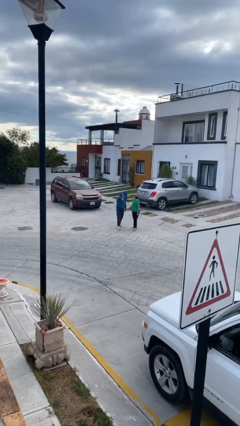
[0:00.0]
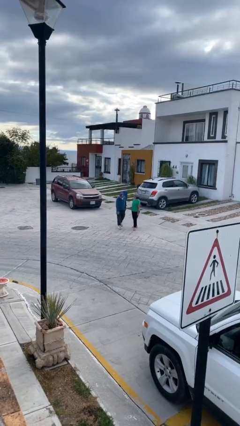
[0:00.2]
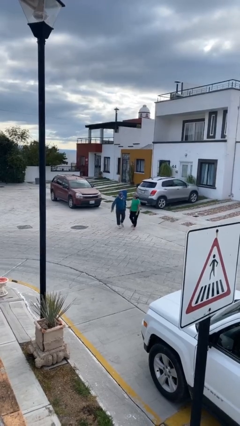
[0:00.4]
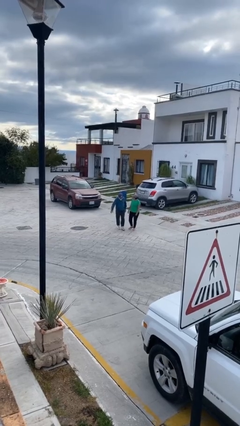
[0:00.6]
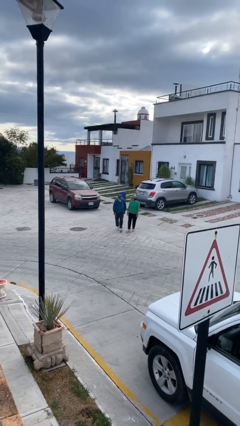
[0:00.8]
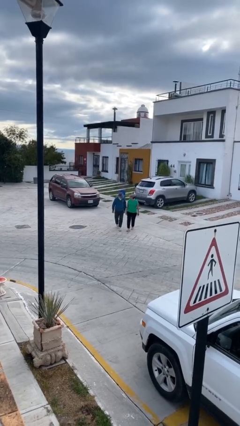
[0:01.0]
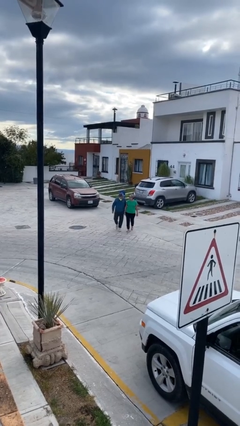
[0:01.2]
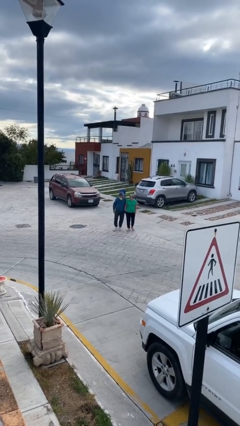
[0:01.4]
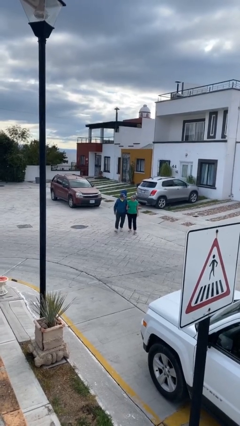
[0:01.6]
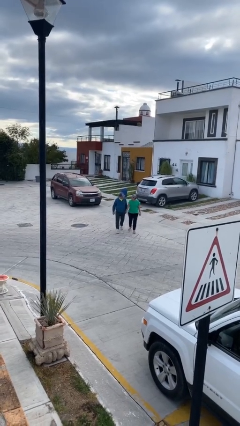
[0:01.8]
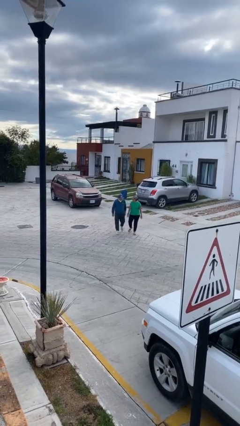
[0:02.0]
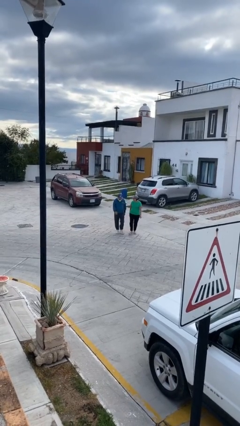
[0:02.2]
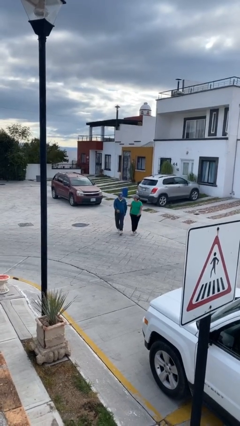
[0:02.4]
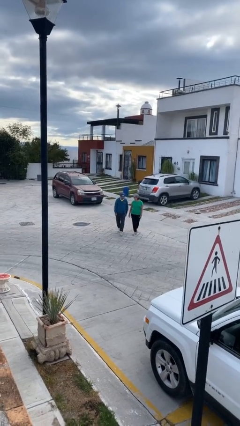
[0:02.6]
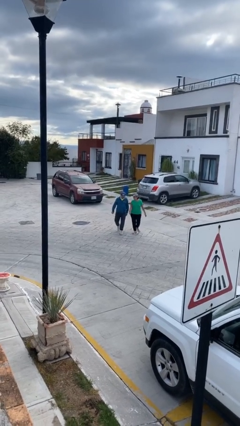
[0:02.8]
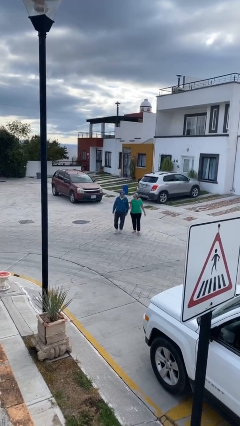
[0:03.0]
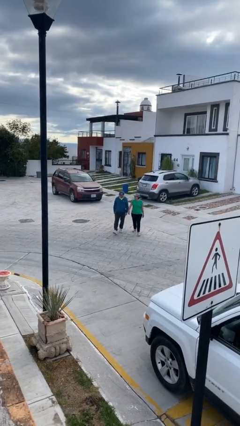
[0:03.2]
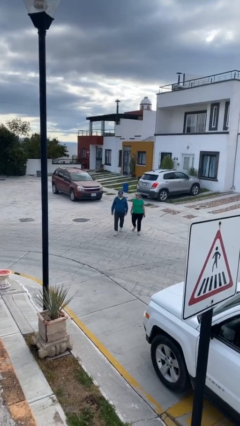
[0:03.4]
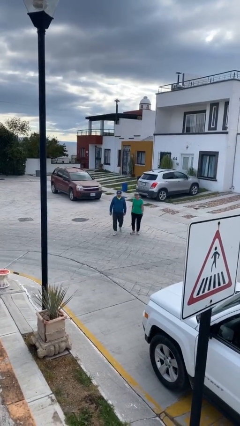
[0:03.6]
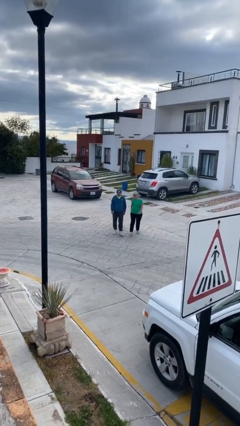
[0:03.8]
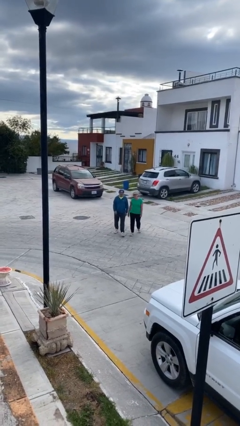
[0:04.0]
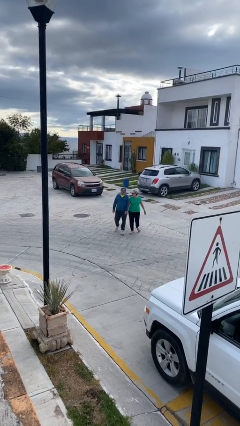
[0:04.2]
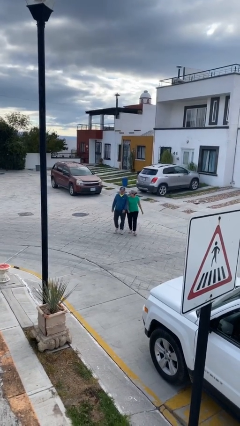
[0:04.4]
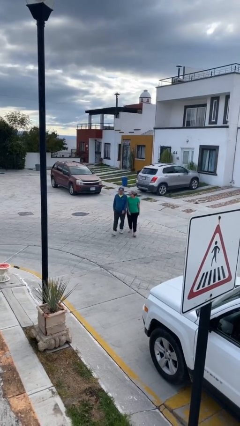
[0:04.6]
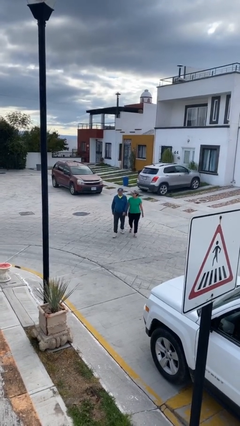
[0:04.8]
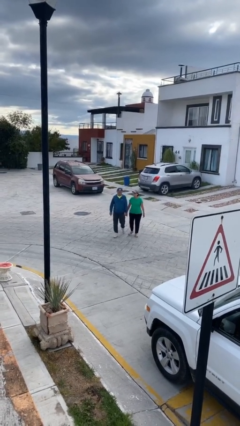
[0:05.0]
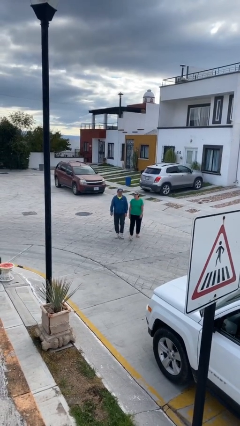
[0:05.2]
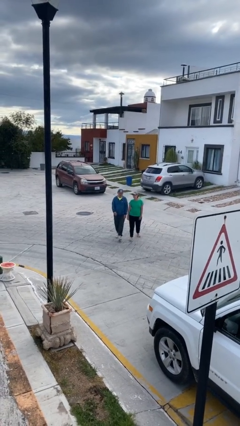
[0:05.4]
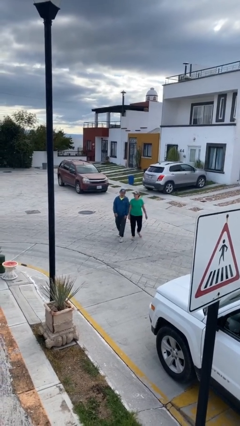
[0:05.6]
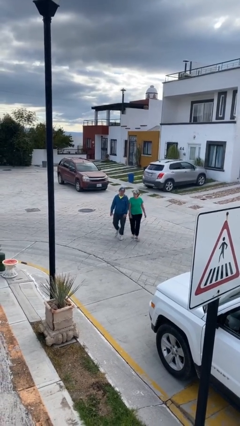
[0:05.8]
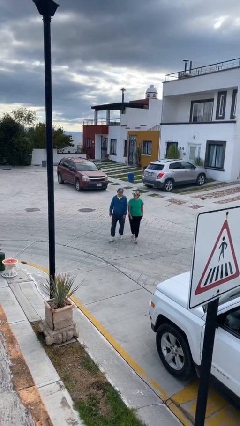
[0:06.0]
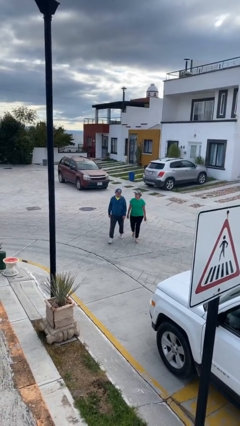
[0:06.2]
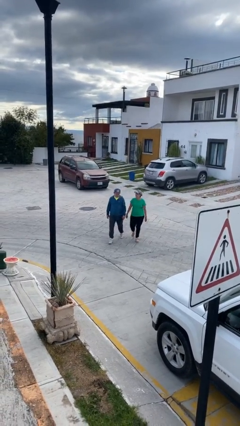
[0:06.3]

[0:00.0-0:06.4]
person talks to person

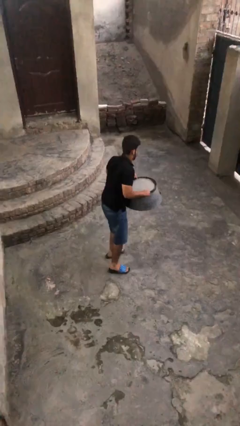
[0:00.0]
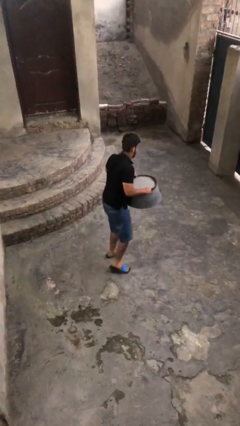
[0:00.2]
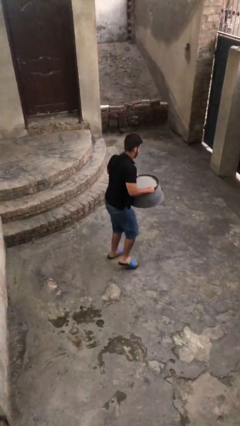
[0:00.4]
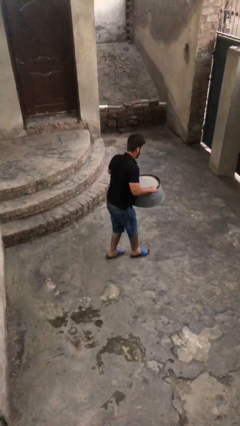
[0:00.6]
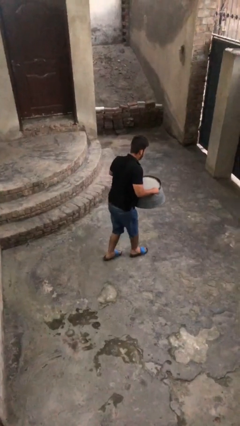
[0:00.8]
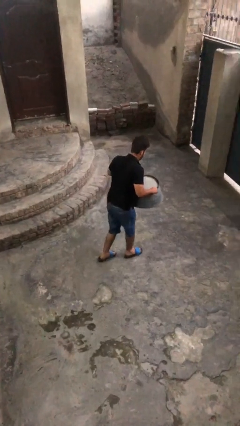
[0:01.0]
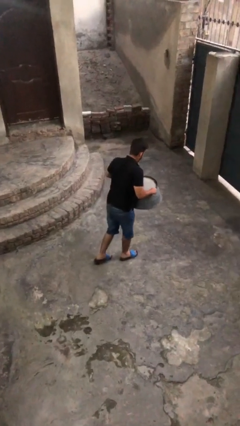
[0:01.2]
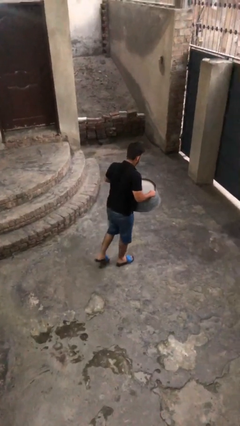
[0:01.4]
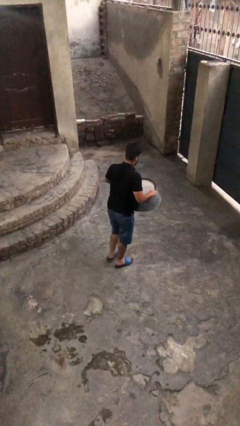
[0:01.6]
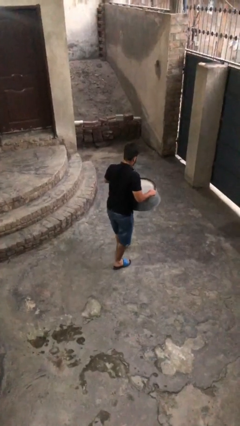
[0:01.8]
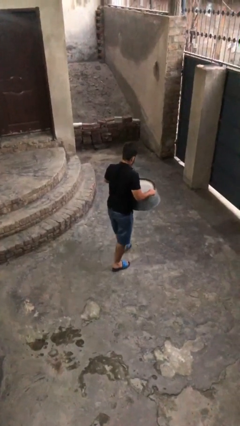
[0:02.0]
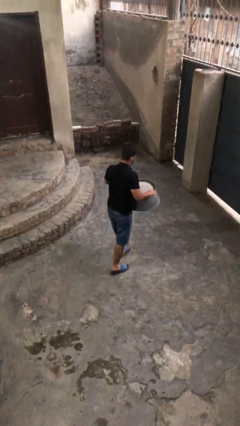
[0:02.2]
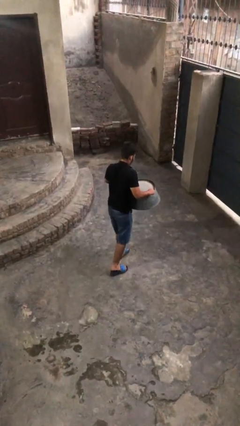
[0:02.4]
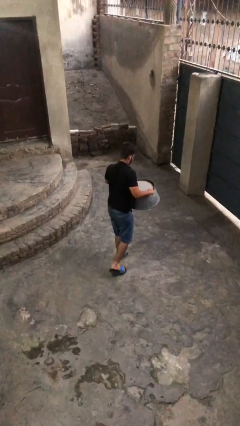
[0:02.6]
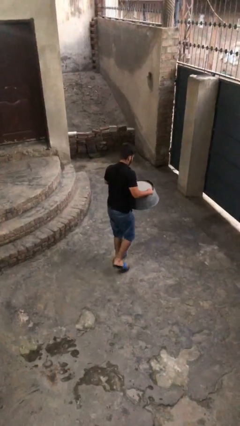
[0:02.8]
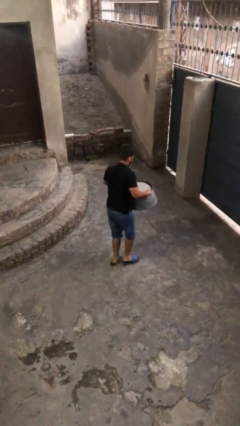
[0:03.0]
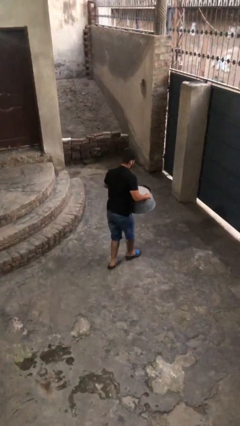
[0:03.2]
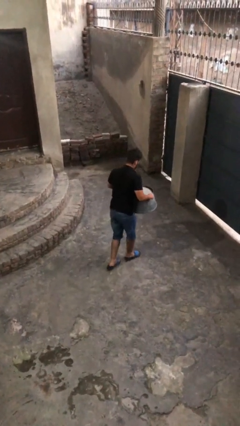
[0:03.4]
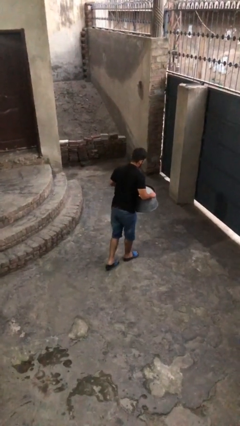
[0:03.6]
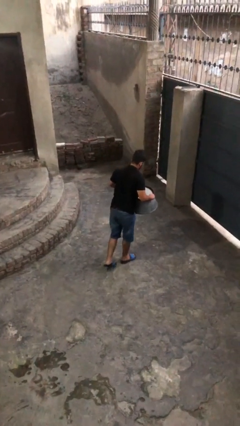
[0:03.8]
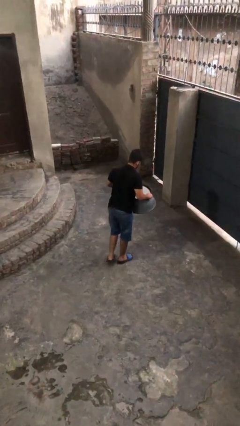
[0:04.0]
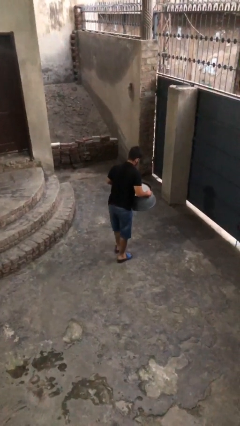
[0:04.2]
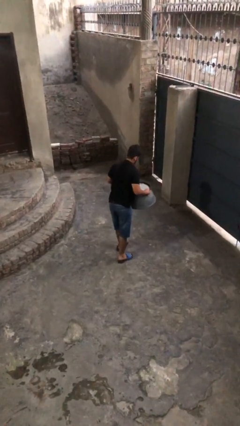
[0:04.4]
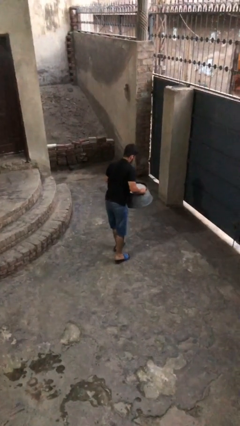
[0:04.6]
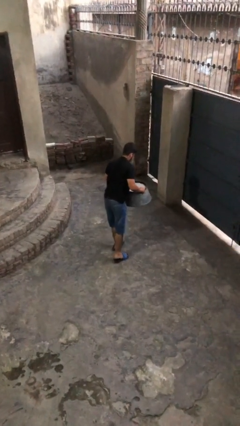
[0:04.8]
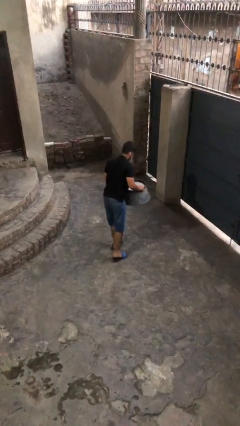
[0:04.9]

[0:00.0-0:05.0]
person carries heavy object

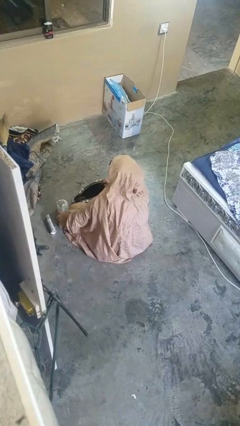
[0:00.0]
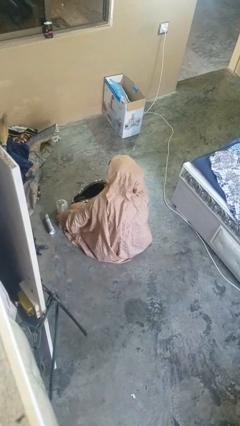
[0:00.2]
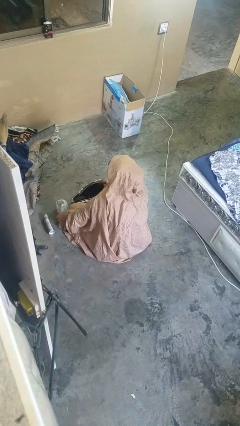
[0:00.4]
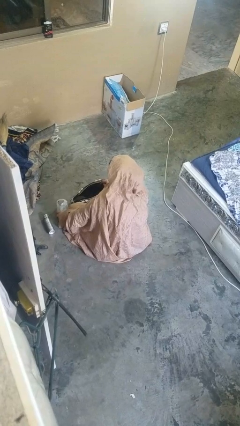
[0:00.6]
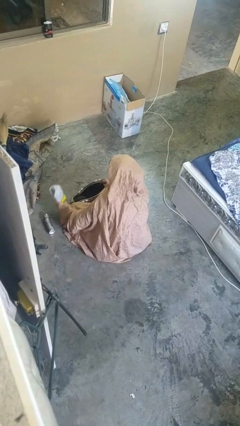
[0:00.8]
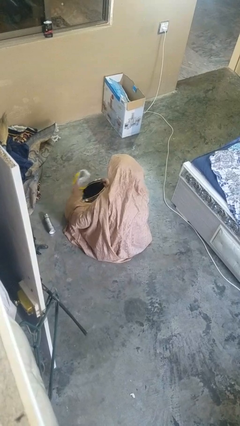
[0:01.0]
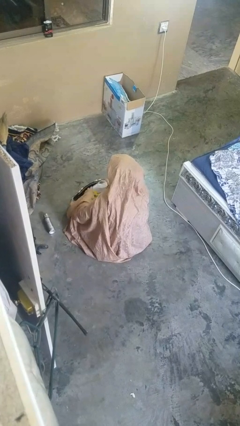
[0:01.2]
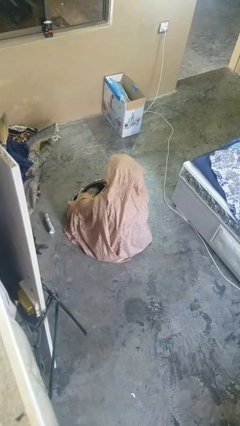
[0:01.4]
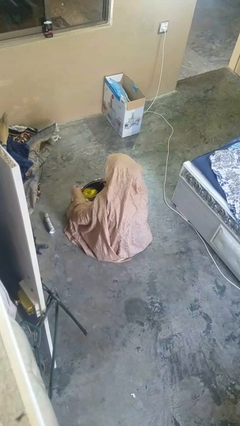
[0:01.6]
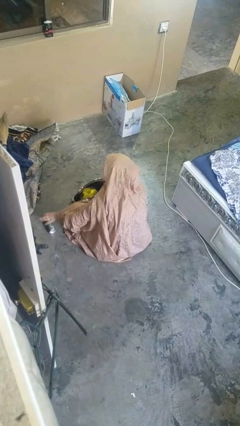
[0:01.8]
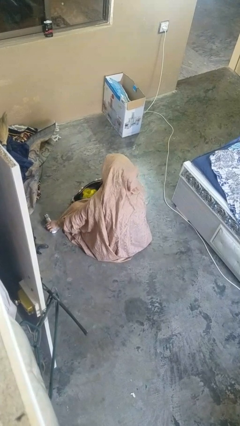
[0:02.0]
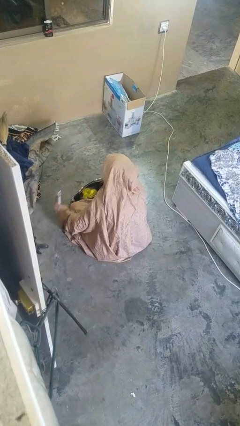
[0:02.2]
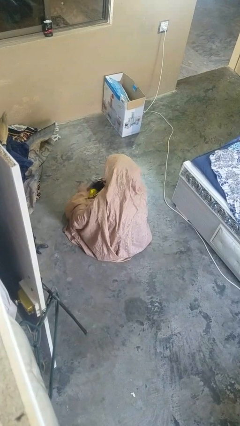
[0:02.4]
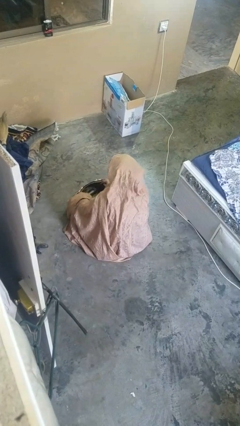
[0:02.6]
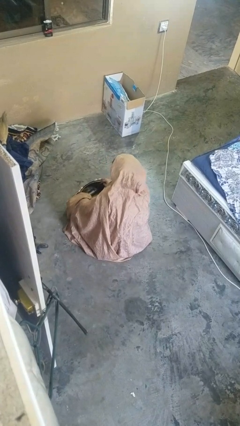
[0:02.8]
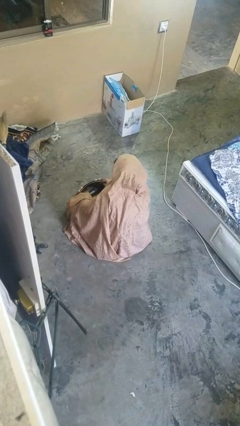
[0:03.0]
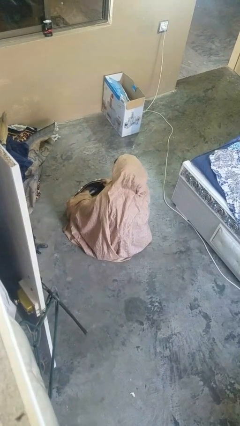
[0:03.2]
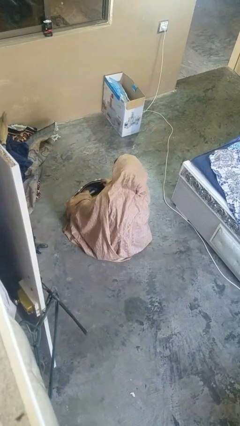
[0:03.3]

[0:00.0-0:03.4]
person puts object into purse

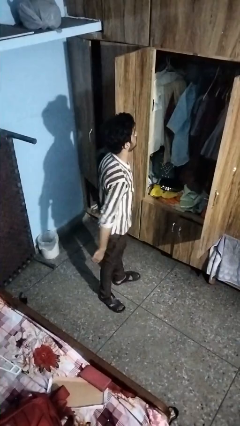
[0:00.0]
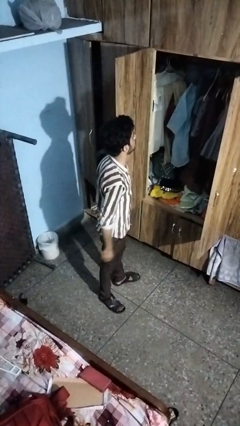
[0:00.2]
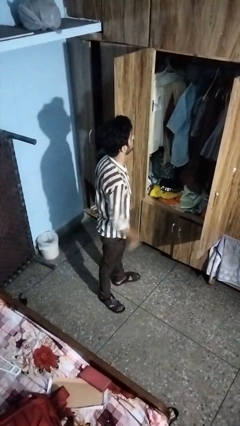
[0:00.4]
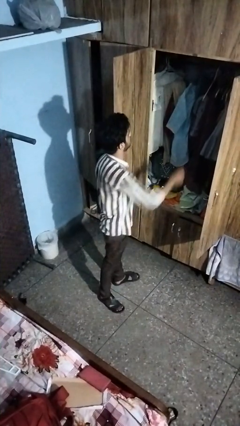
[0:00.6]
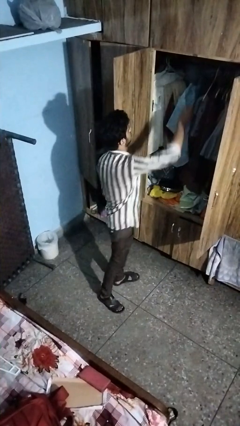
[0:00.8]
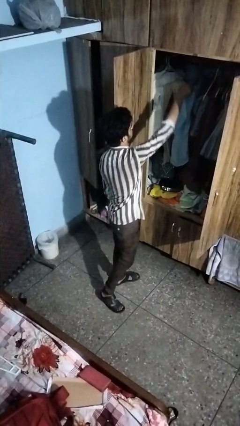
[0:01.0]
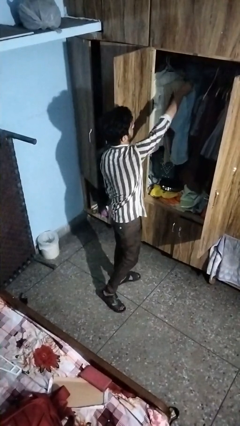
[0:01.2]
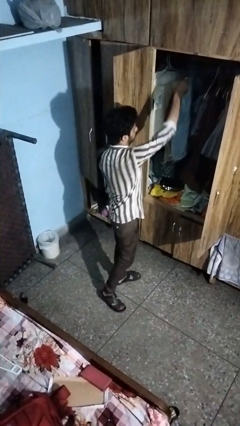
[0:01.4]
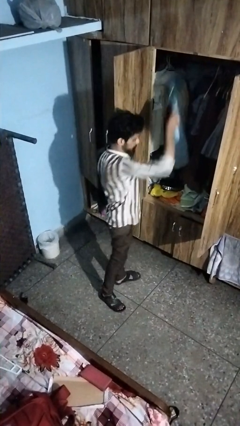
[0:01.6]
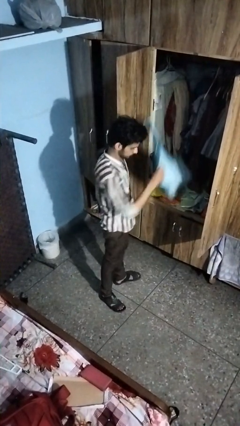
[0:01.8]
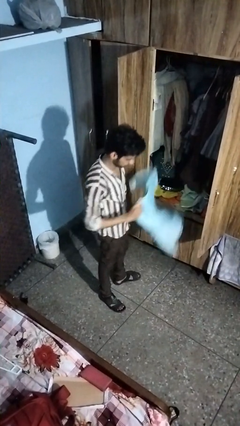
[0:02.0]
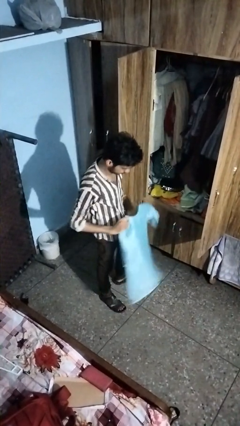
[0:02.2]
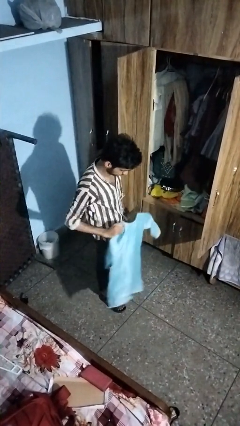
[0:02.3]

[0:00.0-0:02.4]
person takes clothes from closet

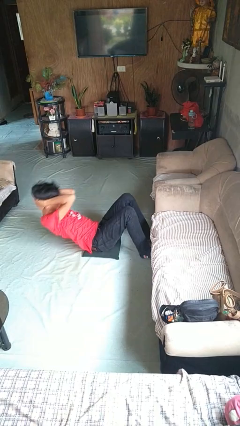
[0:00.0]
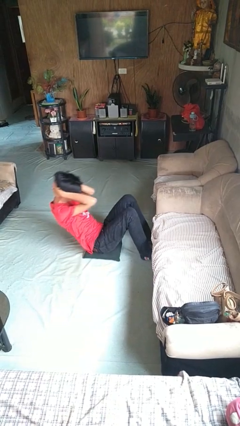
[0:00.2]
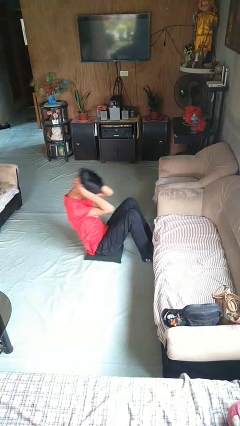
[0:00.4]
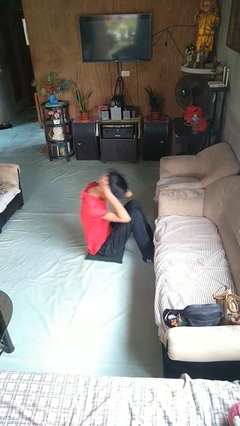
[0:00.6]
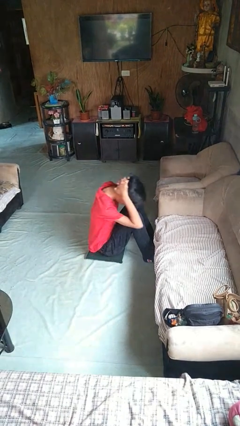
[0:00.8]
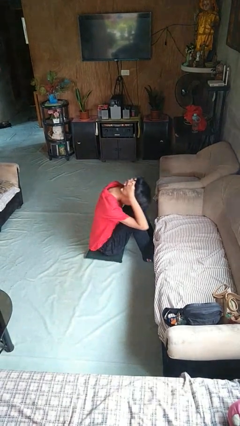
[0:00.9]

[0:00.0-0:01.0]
person exercises with situp
